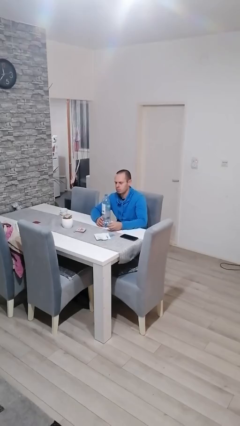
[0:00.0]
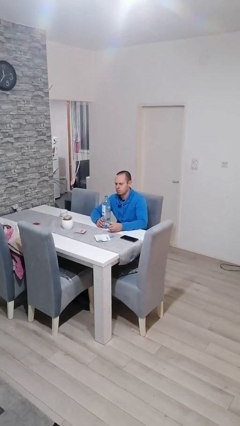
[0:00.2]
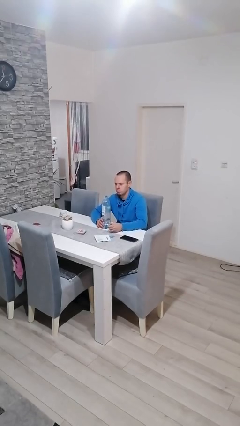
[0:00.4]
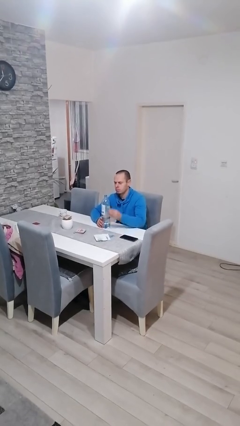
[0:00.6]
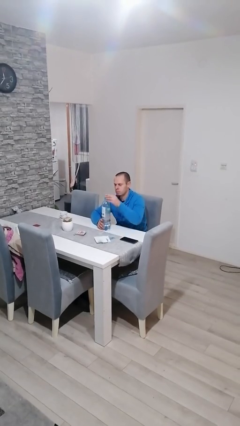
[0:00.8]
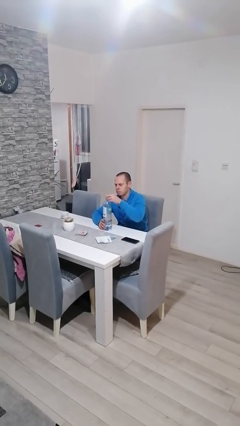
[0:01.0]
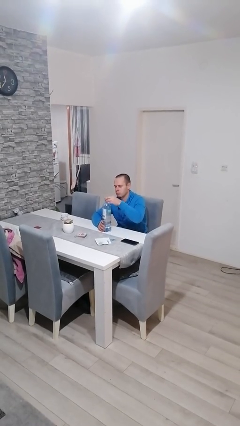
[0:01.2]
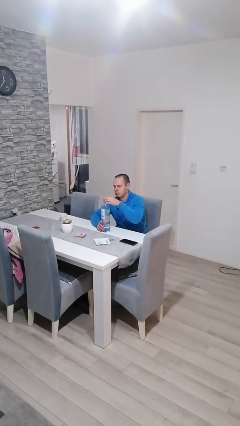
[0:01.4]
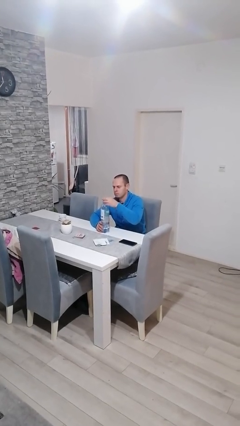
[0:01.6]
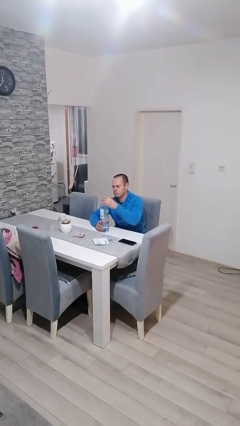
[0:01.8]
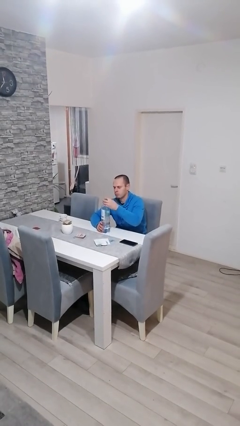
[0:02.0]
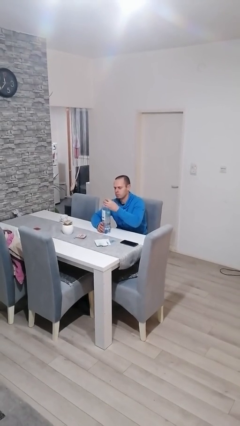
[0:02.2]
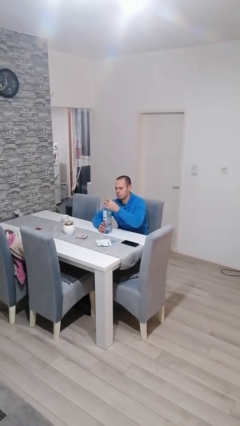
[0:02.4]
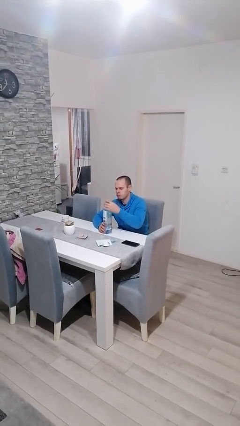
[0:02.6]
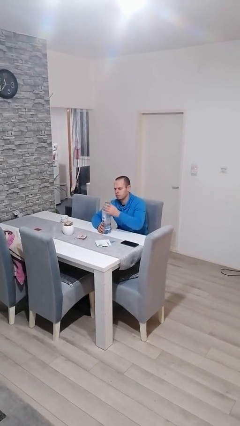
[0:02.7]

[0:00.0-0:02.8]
person screws lid to bottle

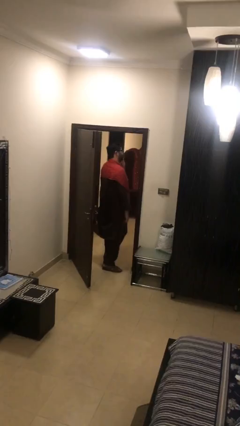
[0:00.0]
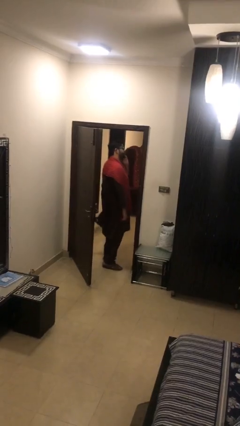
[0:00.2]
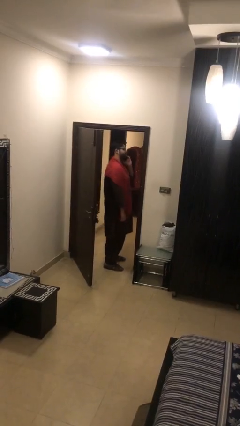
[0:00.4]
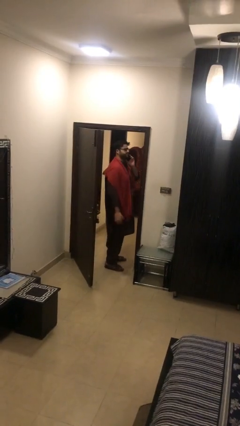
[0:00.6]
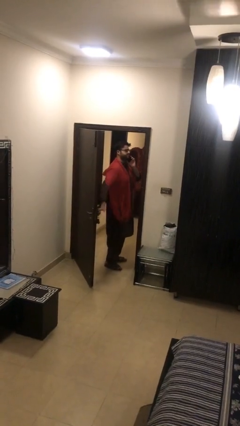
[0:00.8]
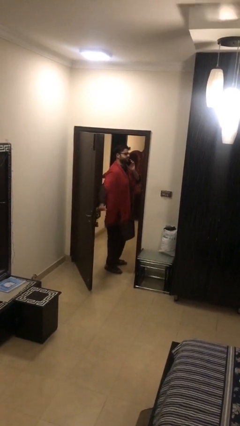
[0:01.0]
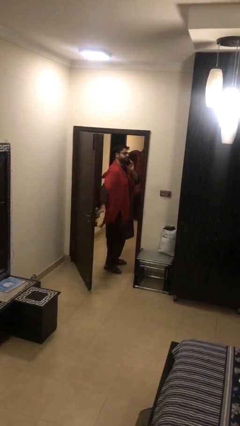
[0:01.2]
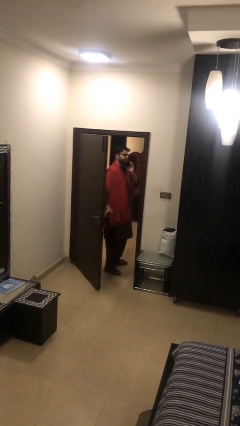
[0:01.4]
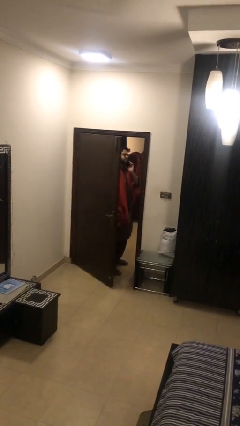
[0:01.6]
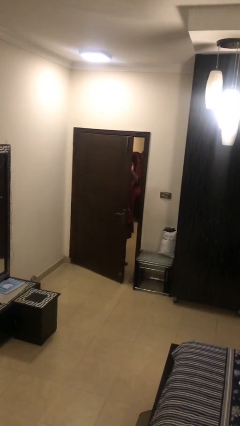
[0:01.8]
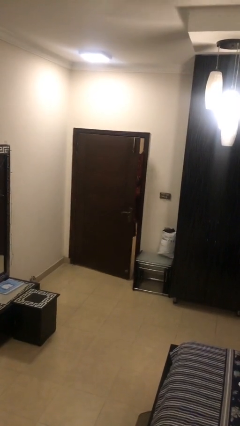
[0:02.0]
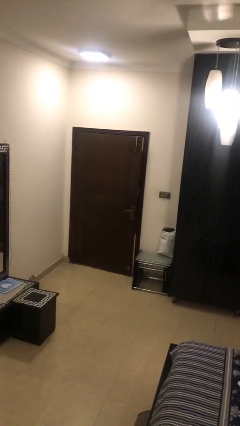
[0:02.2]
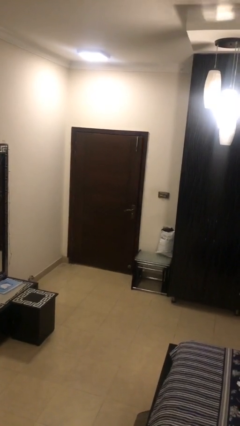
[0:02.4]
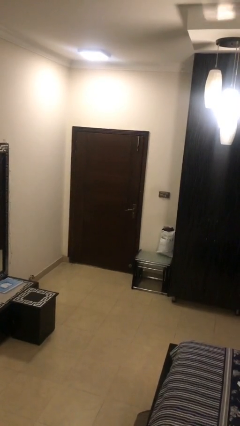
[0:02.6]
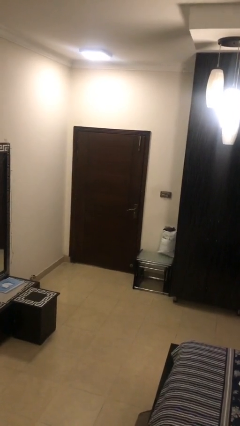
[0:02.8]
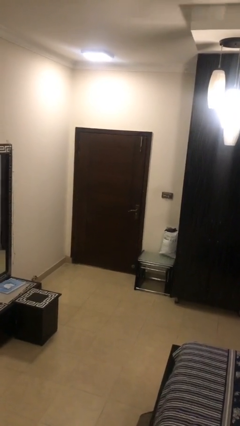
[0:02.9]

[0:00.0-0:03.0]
person closes facility door

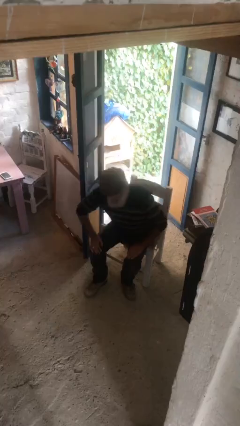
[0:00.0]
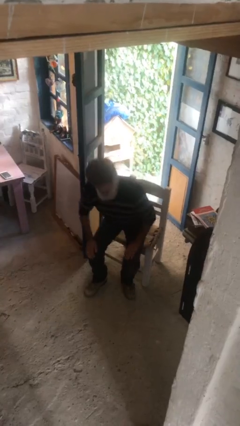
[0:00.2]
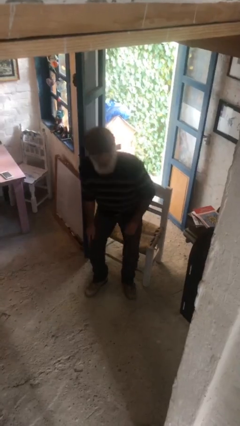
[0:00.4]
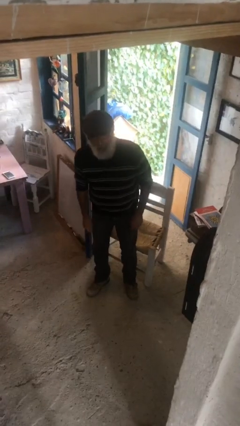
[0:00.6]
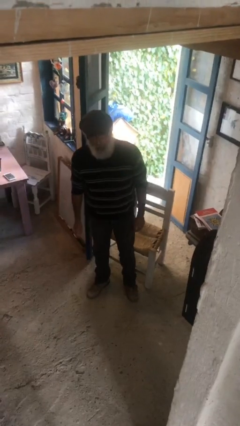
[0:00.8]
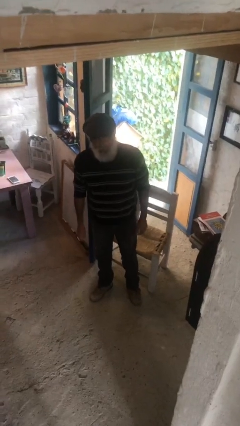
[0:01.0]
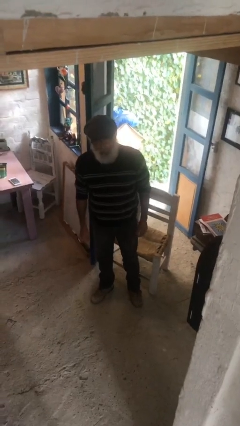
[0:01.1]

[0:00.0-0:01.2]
person stands up

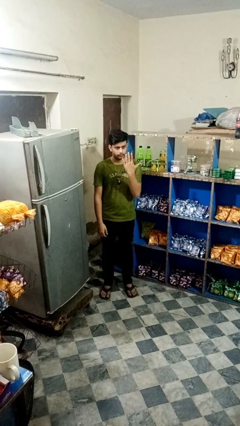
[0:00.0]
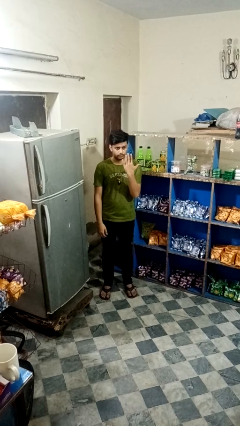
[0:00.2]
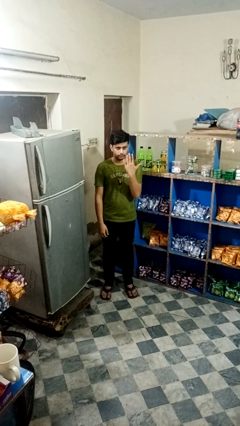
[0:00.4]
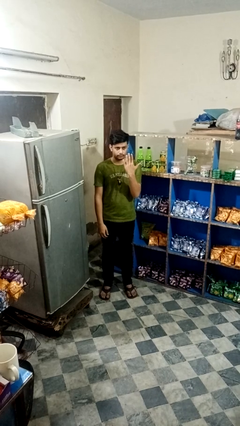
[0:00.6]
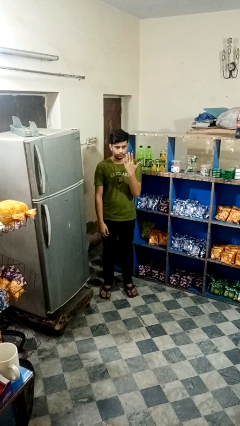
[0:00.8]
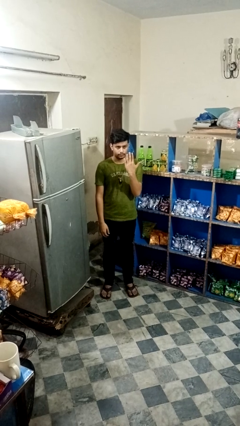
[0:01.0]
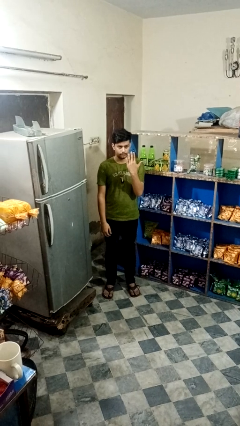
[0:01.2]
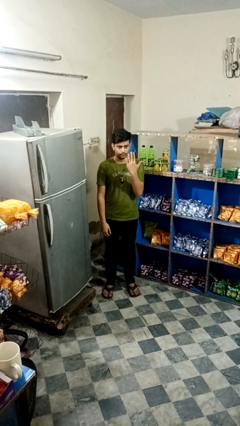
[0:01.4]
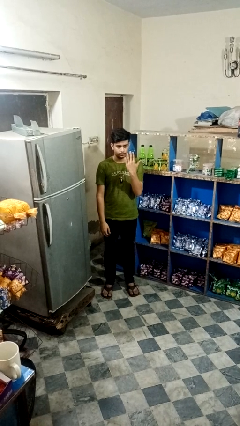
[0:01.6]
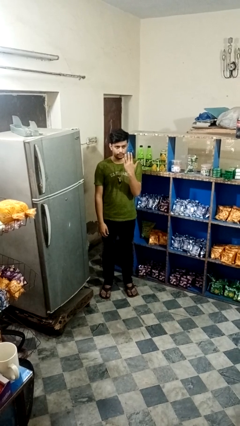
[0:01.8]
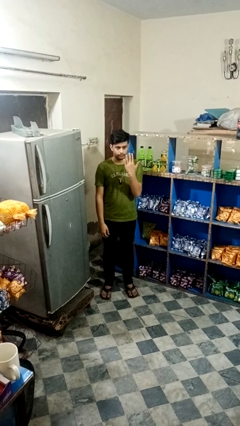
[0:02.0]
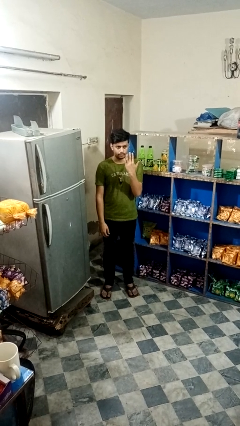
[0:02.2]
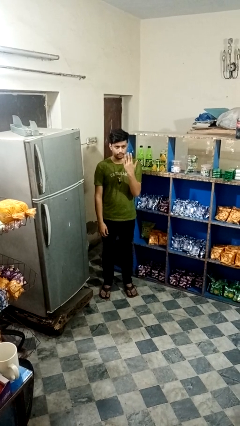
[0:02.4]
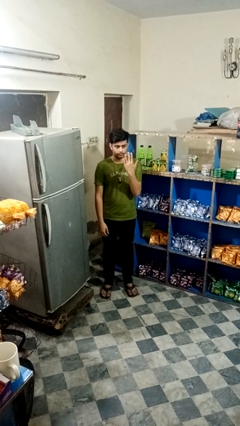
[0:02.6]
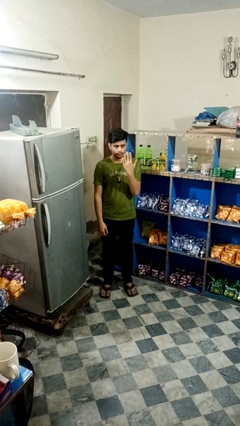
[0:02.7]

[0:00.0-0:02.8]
person gestures number five

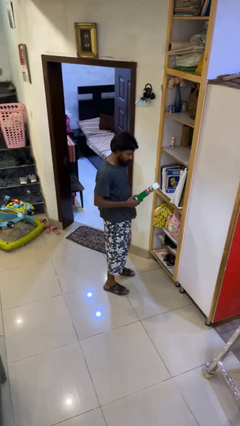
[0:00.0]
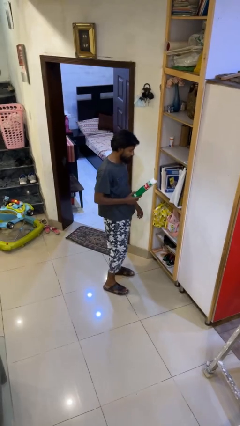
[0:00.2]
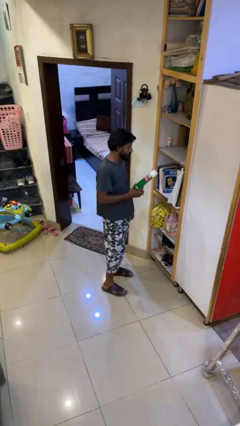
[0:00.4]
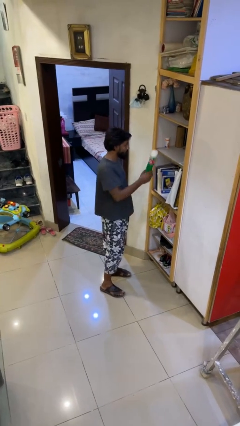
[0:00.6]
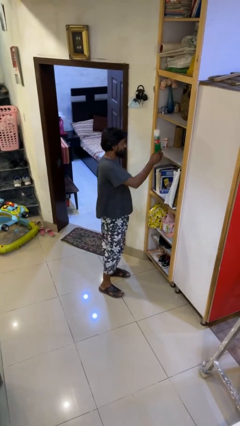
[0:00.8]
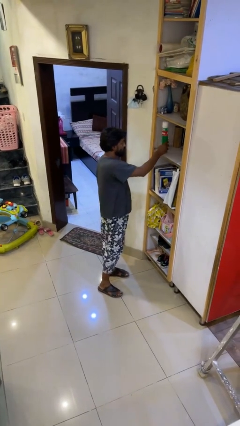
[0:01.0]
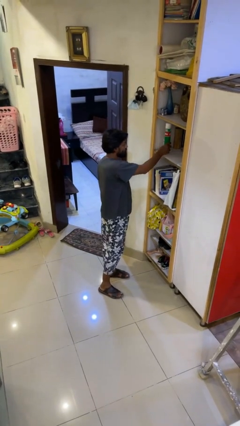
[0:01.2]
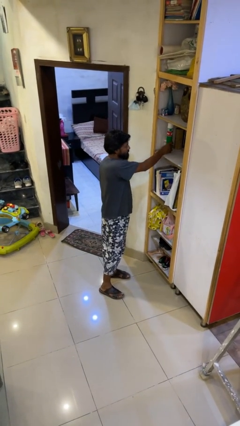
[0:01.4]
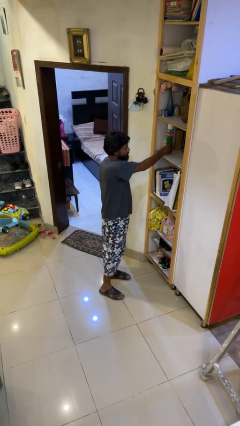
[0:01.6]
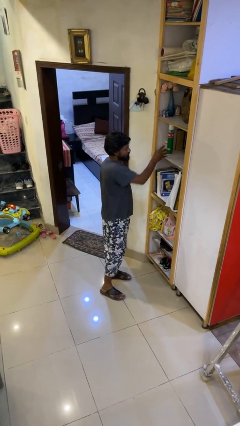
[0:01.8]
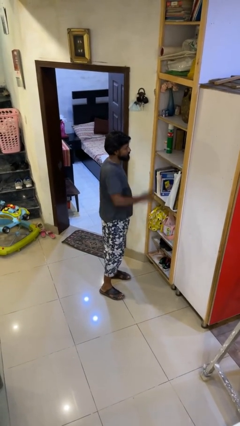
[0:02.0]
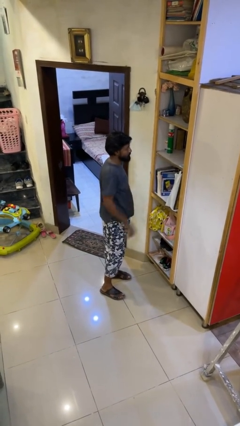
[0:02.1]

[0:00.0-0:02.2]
person puts down object into cabinet

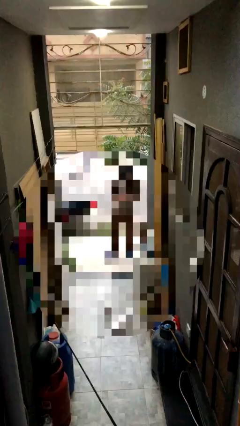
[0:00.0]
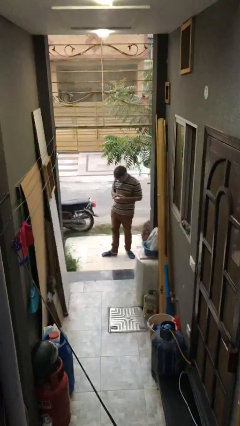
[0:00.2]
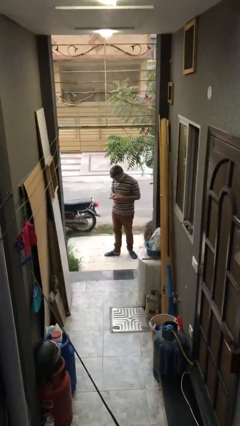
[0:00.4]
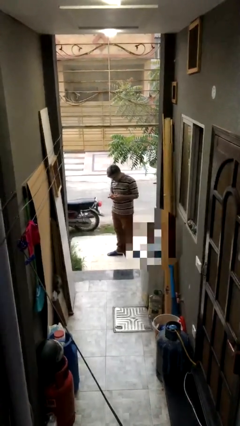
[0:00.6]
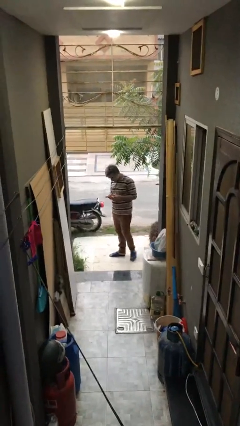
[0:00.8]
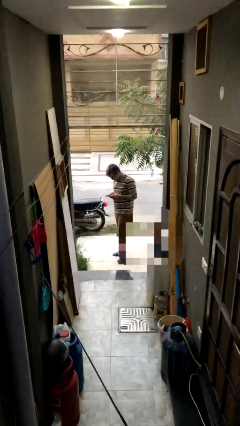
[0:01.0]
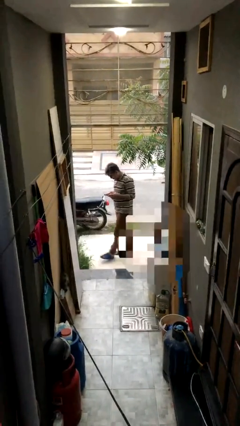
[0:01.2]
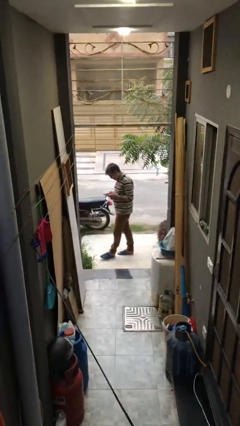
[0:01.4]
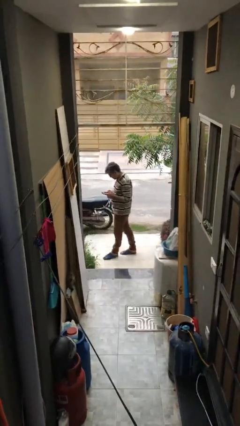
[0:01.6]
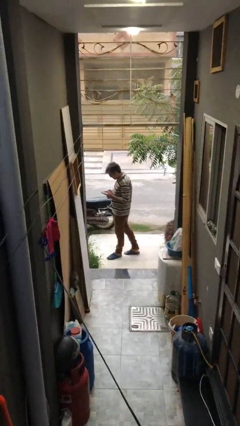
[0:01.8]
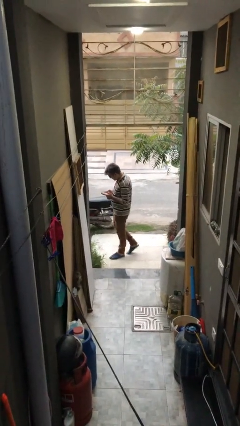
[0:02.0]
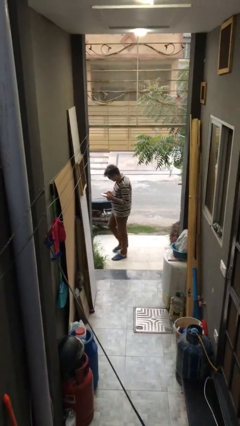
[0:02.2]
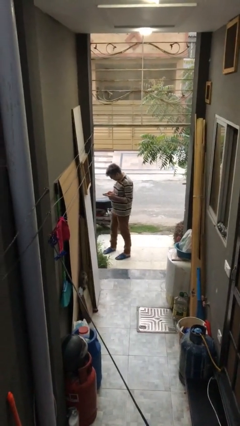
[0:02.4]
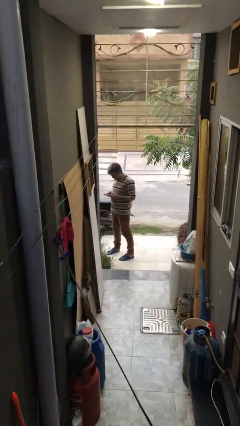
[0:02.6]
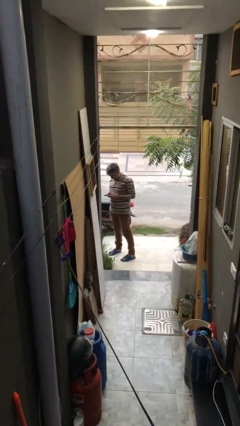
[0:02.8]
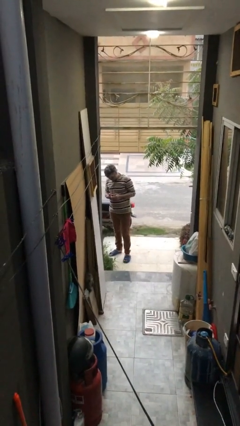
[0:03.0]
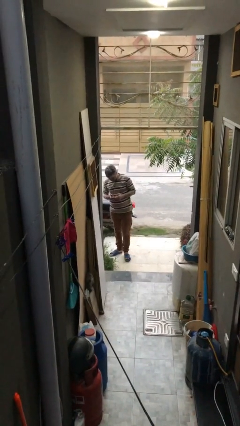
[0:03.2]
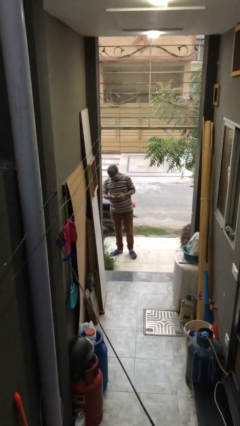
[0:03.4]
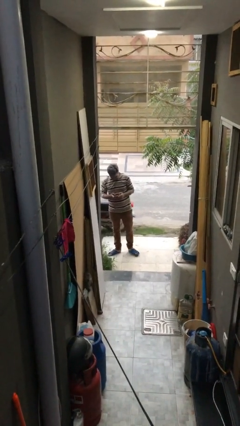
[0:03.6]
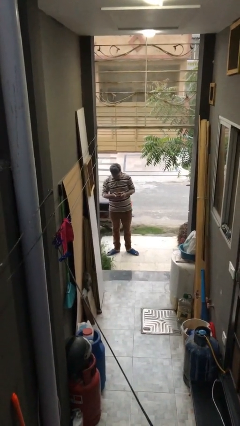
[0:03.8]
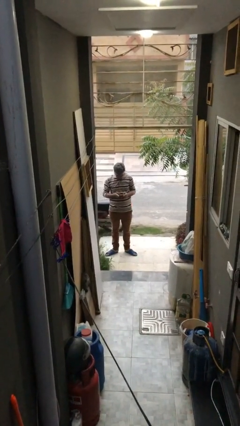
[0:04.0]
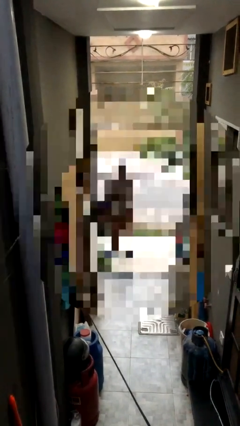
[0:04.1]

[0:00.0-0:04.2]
person texts on phone

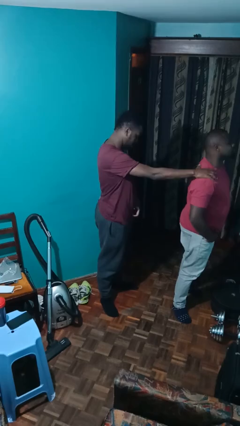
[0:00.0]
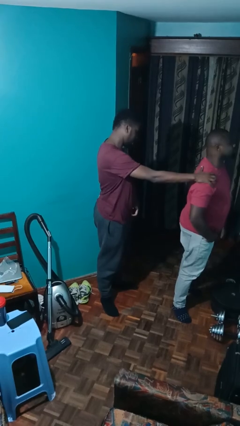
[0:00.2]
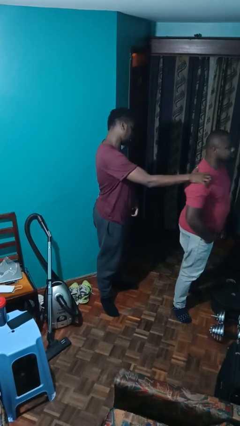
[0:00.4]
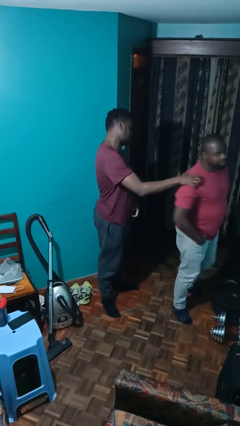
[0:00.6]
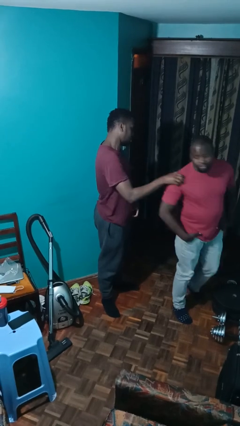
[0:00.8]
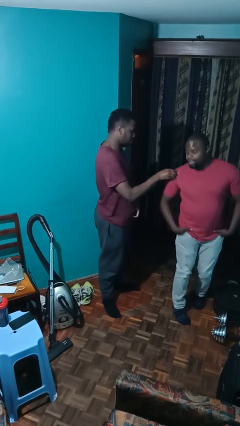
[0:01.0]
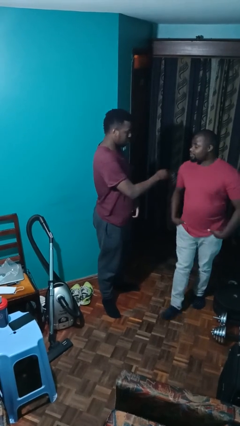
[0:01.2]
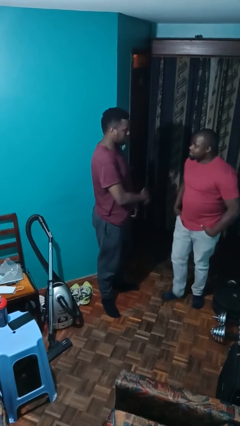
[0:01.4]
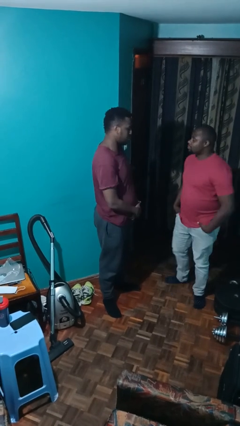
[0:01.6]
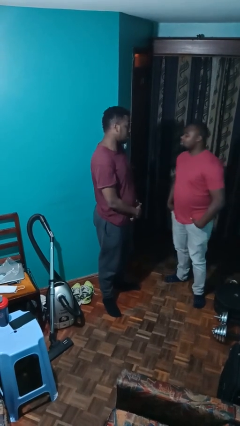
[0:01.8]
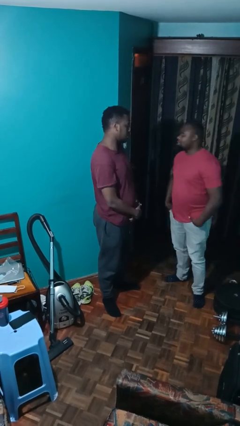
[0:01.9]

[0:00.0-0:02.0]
person spins person around
